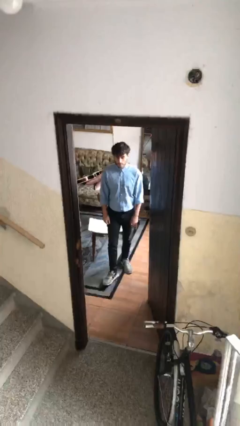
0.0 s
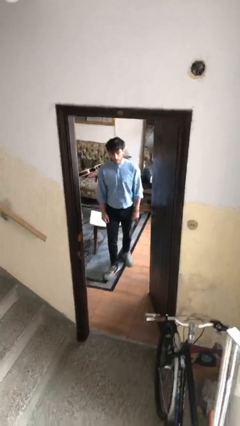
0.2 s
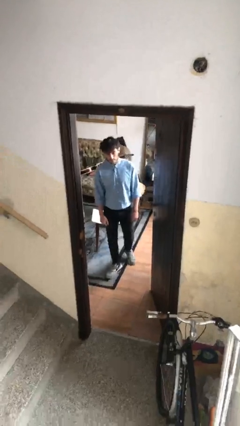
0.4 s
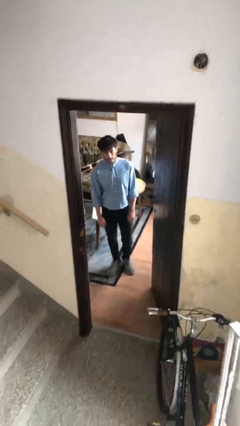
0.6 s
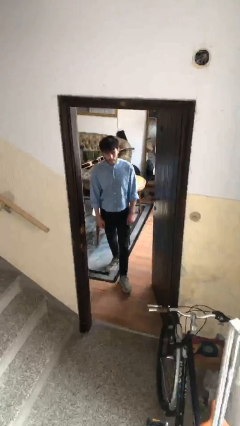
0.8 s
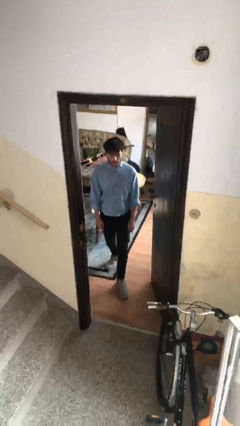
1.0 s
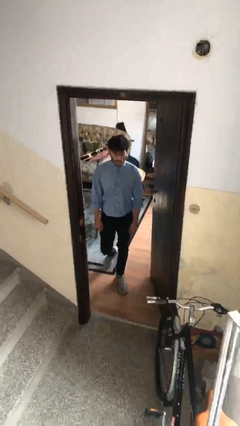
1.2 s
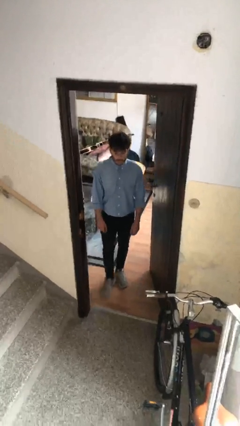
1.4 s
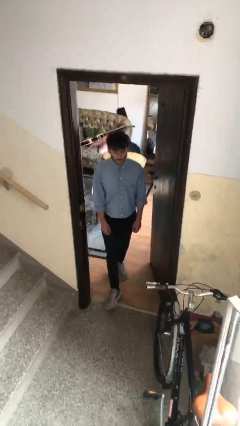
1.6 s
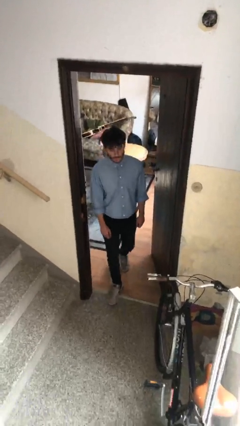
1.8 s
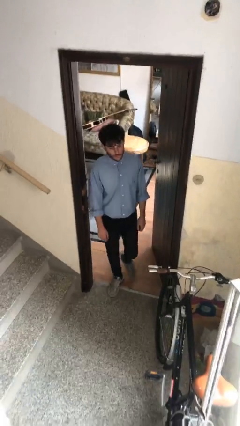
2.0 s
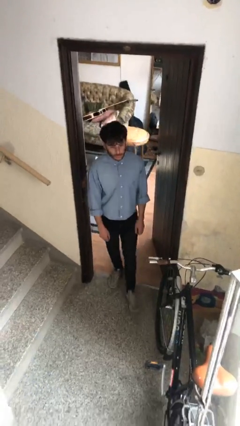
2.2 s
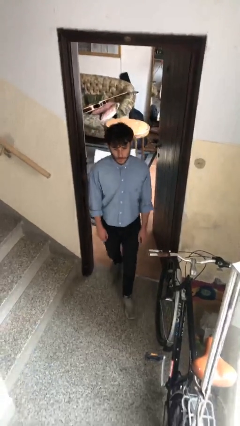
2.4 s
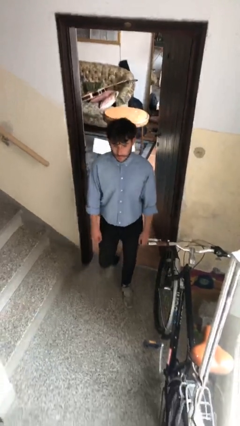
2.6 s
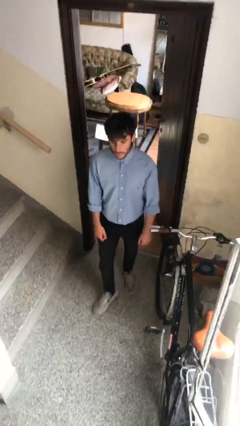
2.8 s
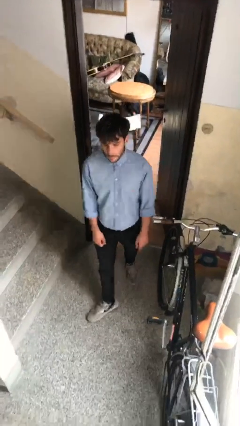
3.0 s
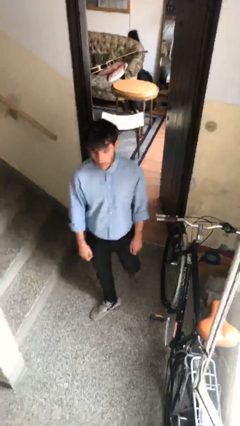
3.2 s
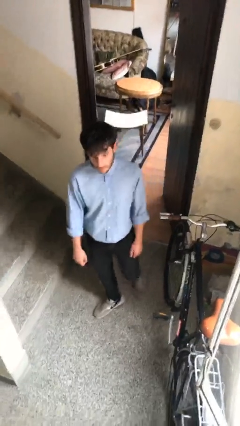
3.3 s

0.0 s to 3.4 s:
person enters scene through structure

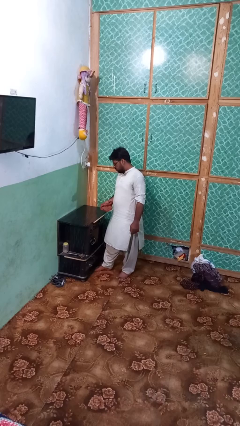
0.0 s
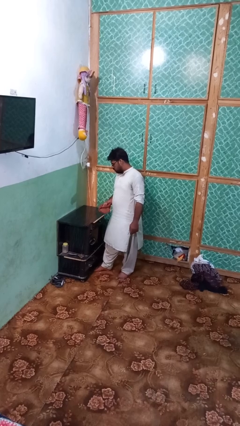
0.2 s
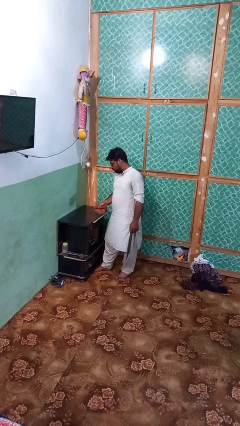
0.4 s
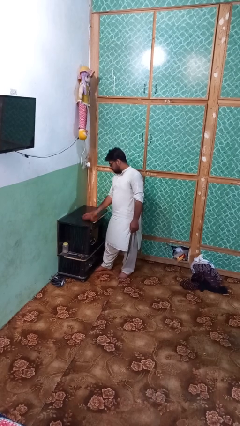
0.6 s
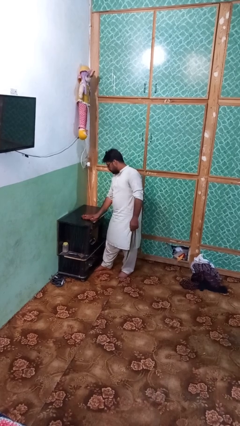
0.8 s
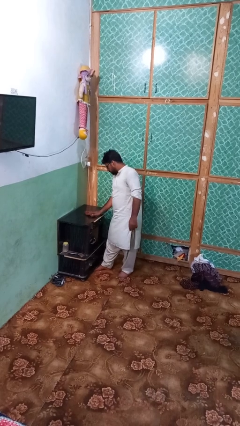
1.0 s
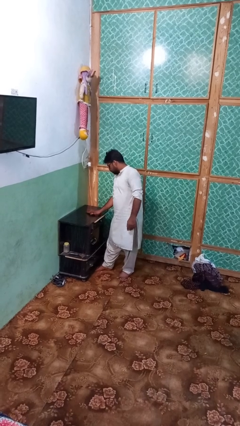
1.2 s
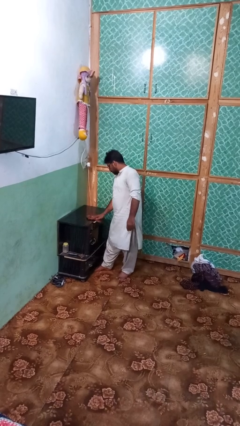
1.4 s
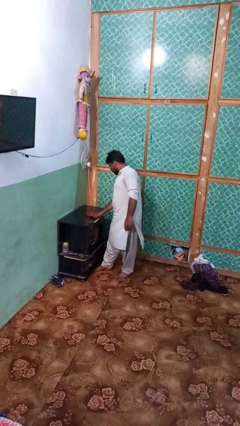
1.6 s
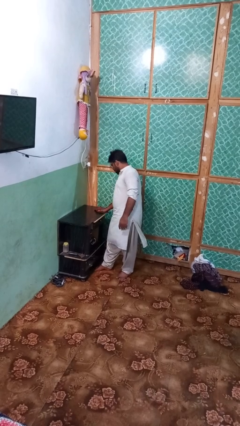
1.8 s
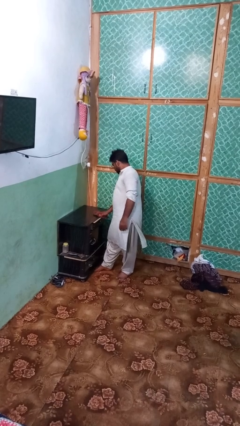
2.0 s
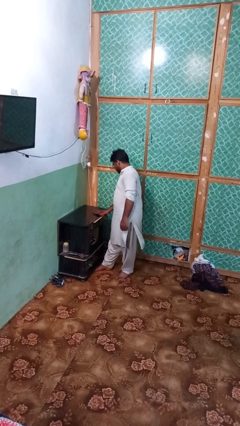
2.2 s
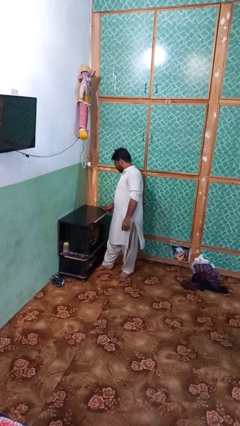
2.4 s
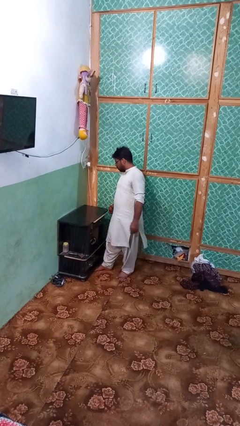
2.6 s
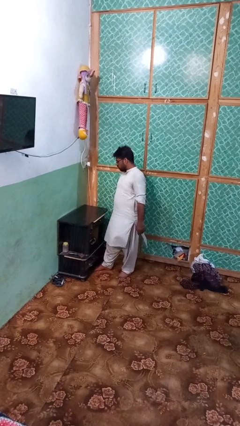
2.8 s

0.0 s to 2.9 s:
person cleans table with rag

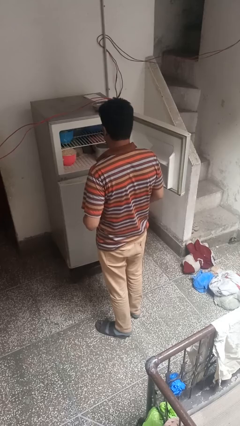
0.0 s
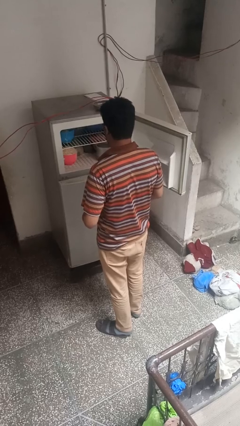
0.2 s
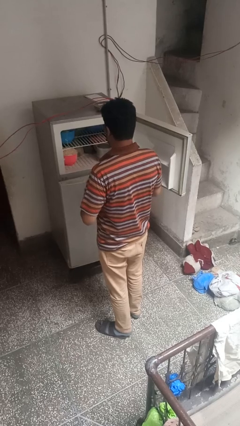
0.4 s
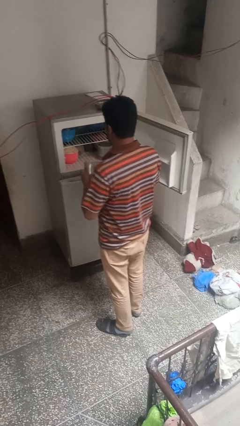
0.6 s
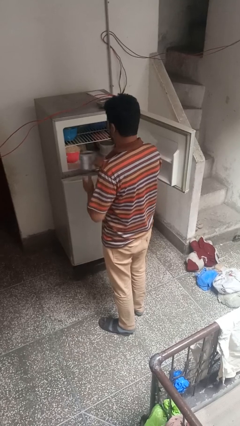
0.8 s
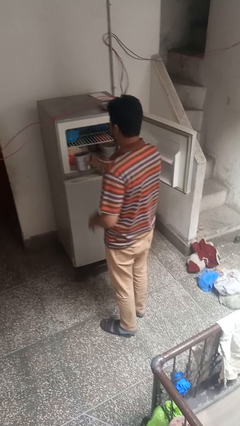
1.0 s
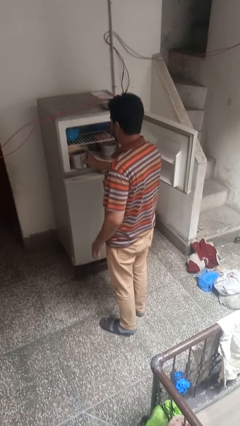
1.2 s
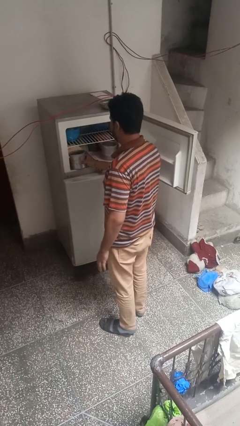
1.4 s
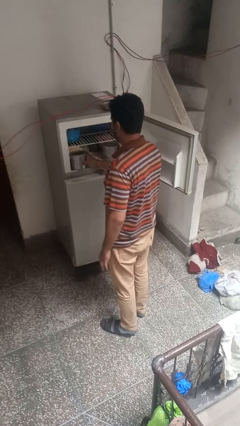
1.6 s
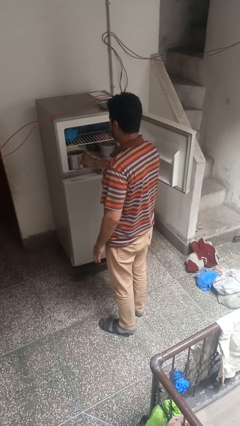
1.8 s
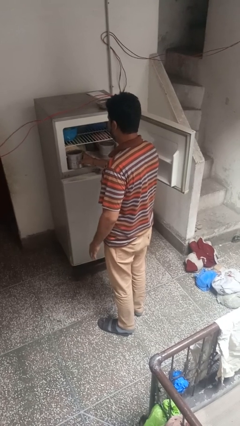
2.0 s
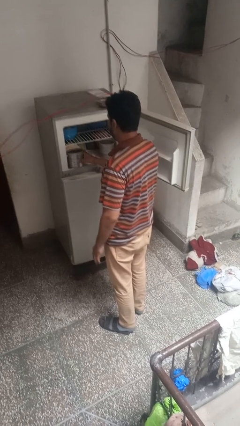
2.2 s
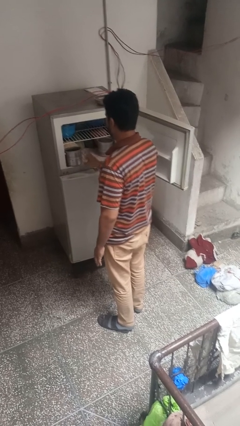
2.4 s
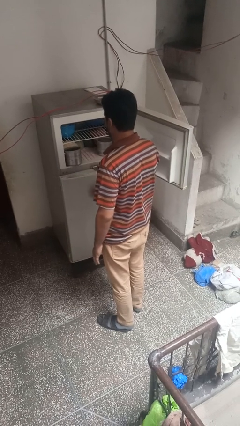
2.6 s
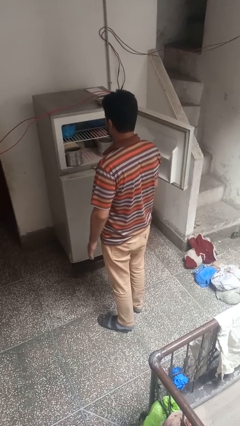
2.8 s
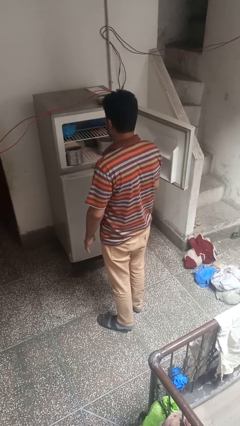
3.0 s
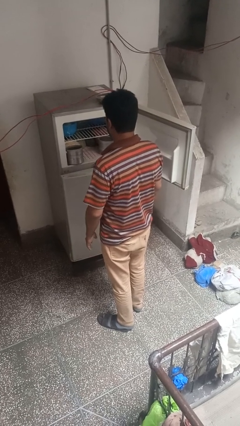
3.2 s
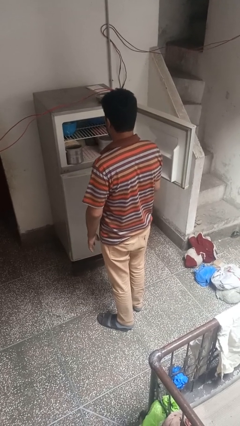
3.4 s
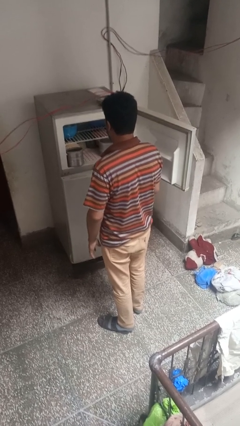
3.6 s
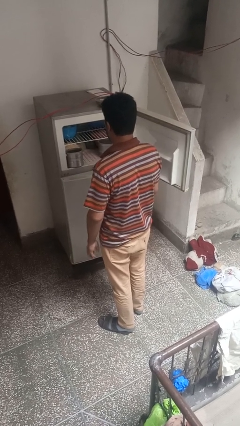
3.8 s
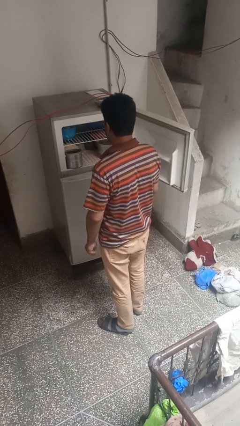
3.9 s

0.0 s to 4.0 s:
person puts object into refrigerator

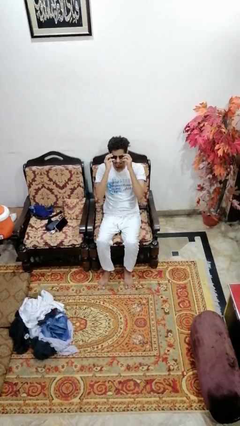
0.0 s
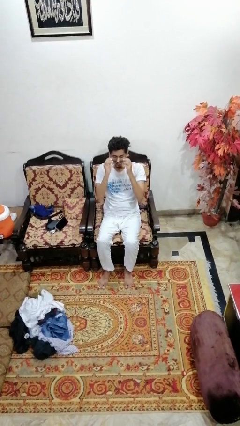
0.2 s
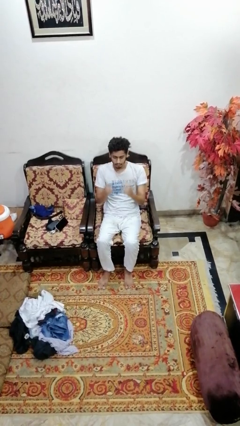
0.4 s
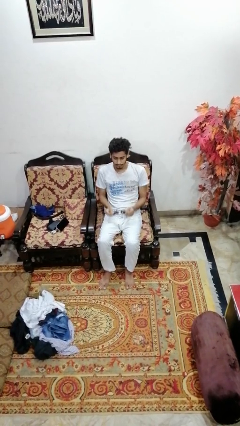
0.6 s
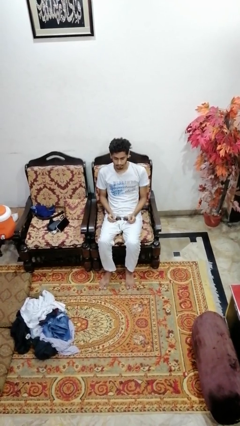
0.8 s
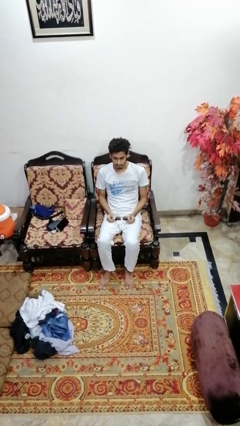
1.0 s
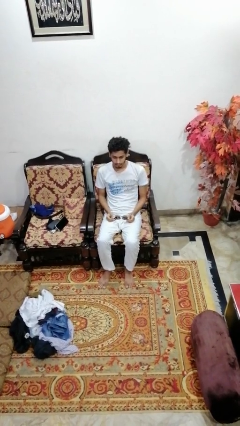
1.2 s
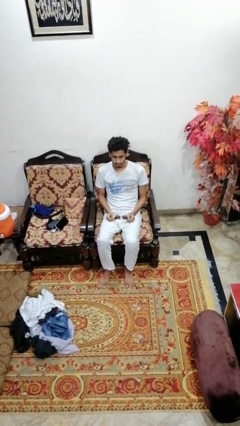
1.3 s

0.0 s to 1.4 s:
person takes off sunglasses

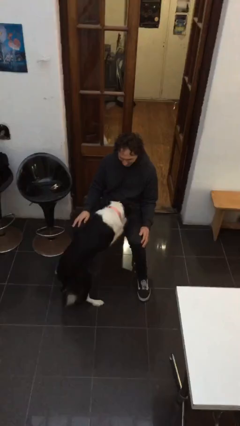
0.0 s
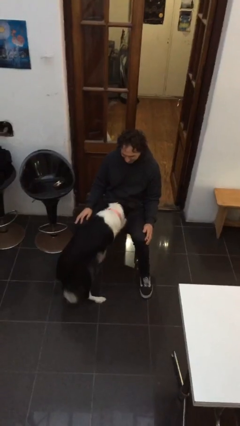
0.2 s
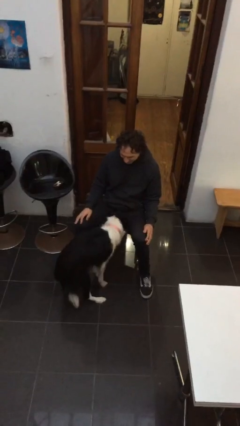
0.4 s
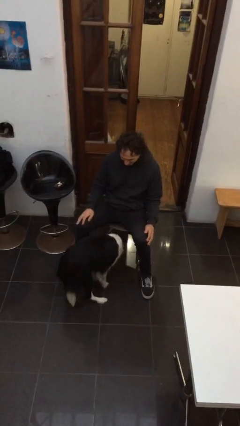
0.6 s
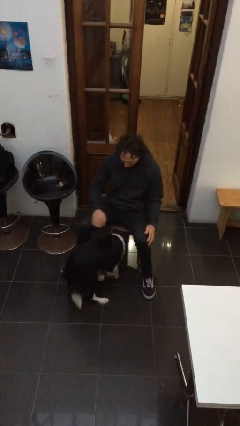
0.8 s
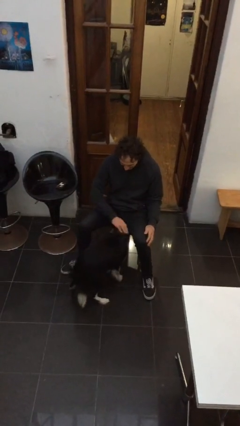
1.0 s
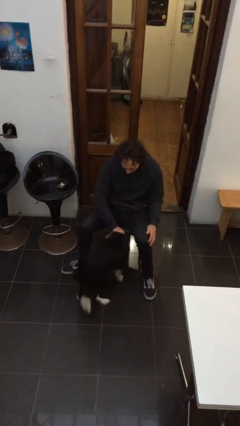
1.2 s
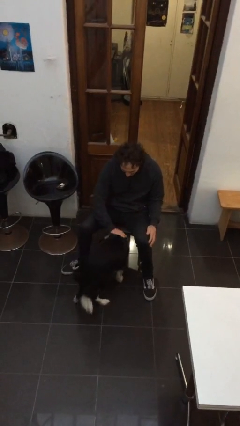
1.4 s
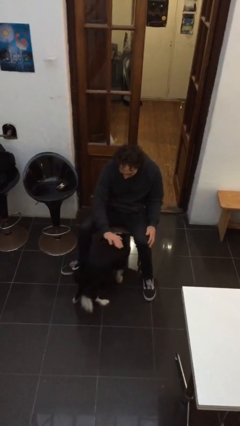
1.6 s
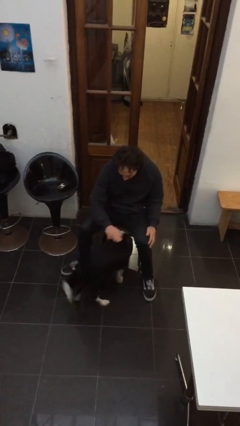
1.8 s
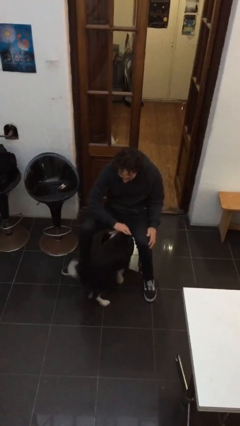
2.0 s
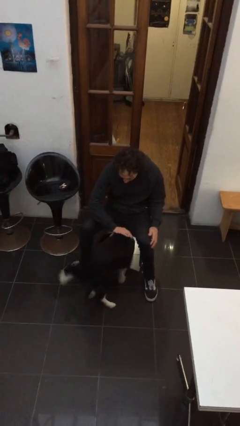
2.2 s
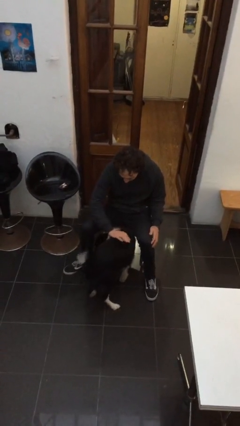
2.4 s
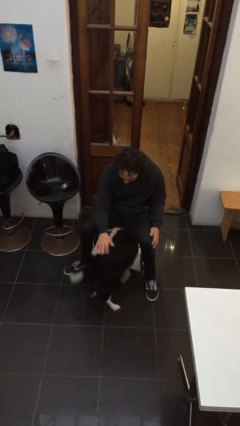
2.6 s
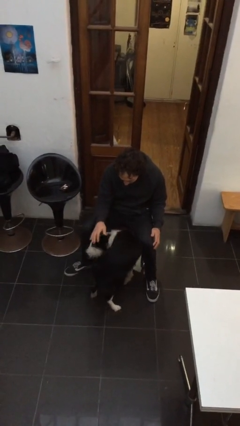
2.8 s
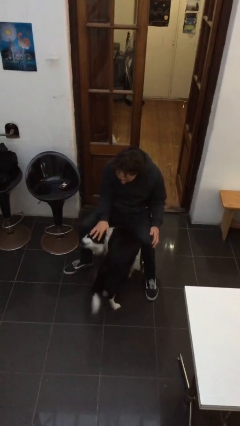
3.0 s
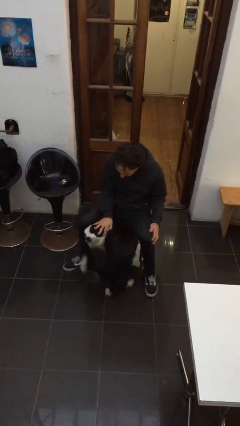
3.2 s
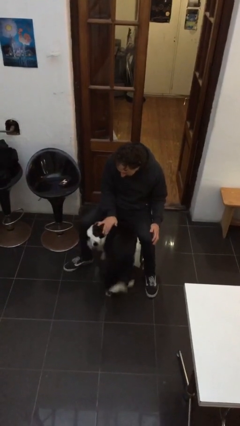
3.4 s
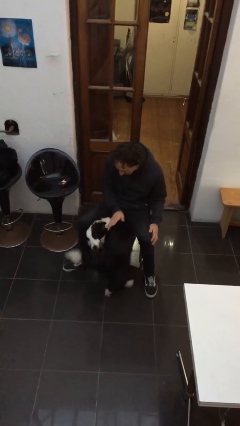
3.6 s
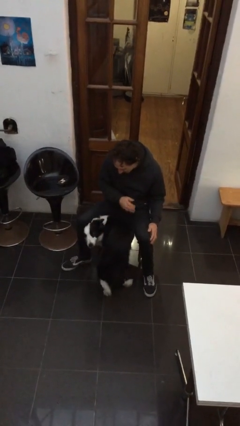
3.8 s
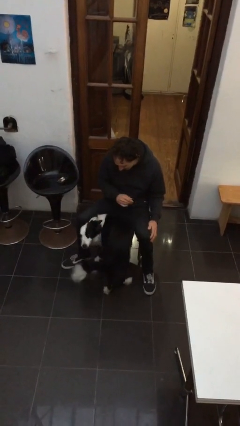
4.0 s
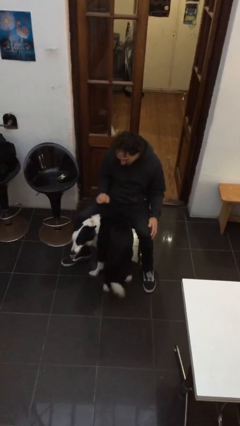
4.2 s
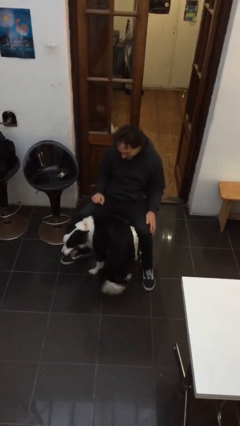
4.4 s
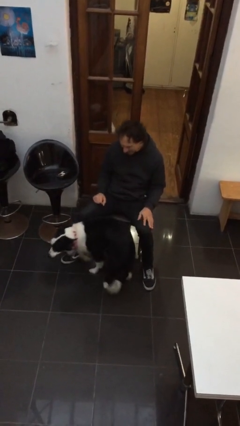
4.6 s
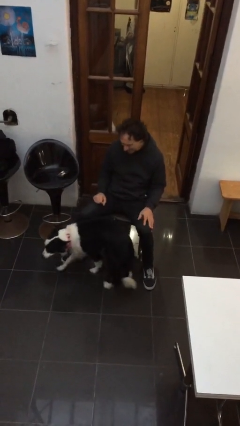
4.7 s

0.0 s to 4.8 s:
person pets dog

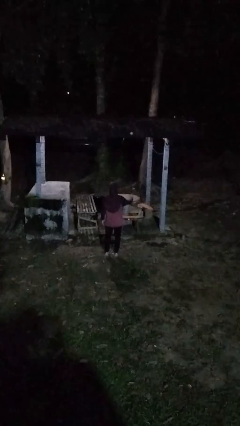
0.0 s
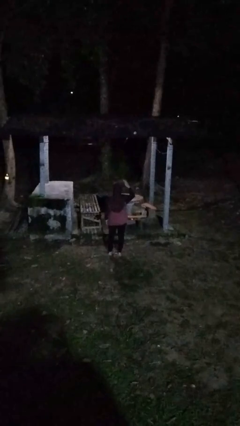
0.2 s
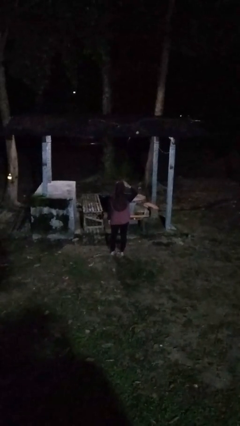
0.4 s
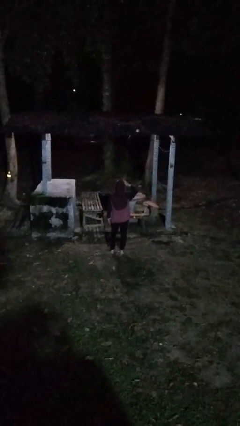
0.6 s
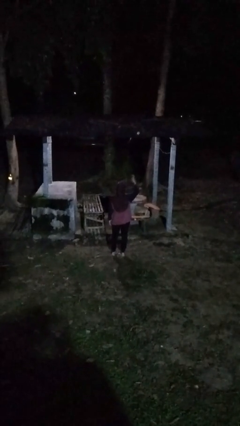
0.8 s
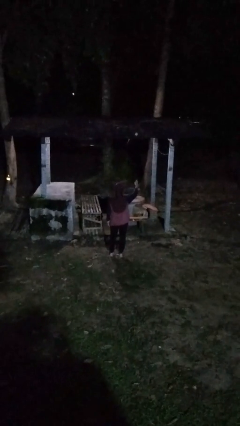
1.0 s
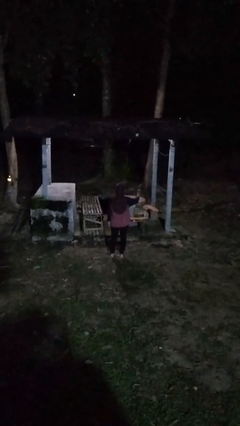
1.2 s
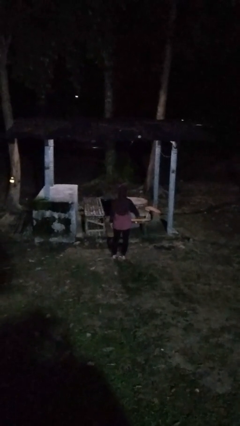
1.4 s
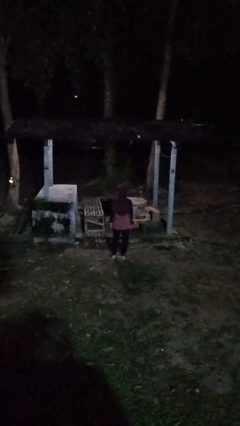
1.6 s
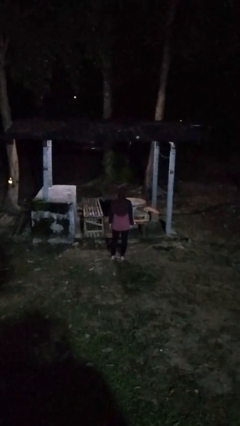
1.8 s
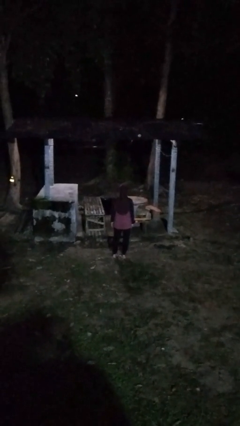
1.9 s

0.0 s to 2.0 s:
person salutes
